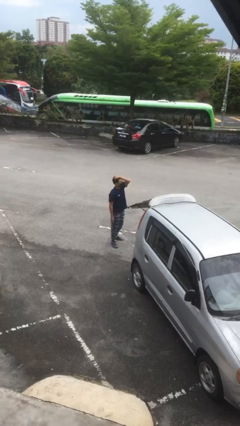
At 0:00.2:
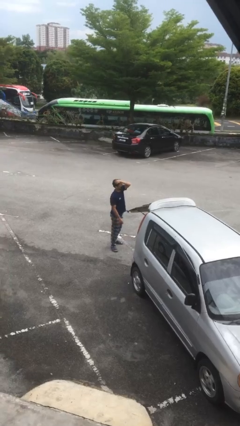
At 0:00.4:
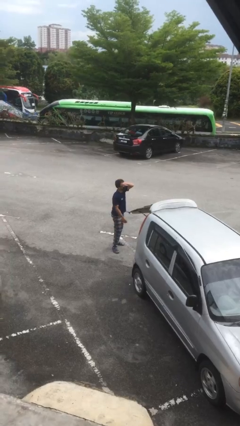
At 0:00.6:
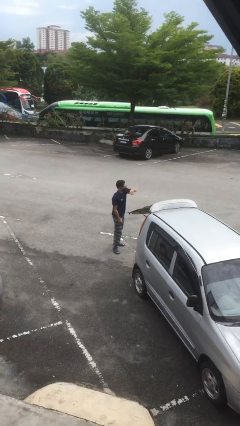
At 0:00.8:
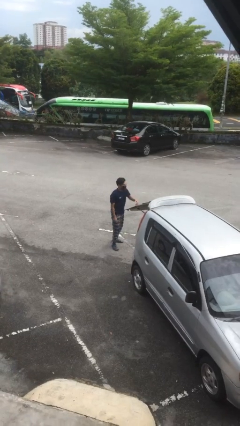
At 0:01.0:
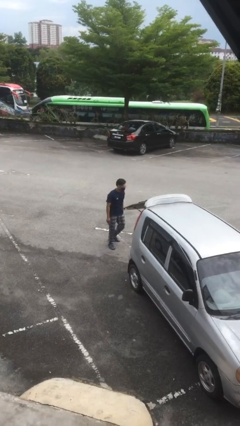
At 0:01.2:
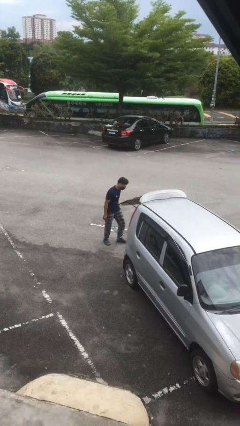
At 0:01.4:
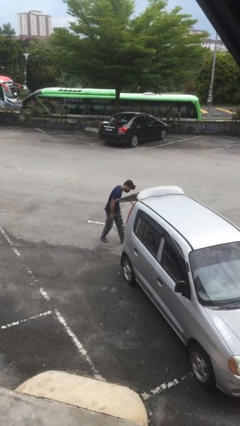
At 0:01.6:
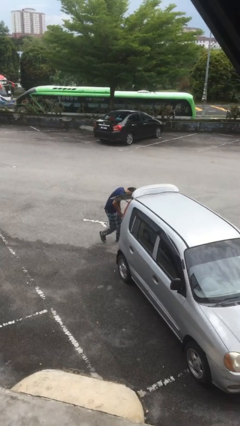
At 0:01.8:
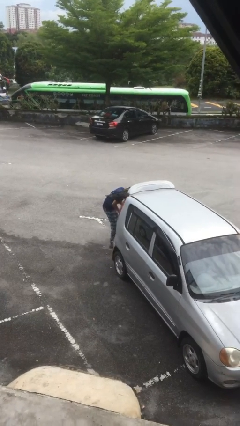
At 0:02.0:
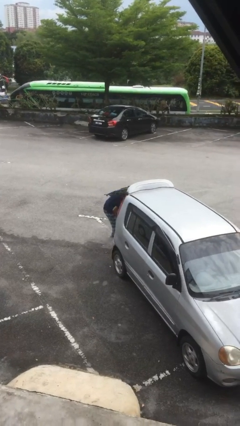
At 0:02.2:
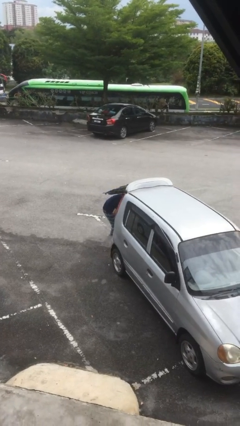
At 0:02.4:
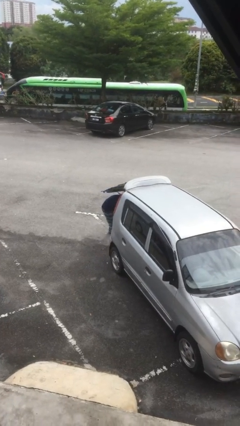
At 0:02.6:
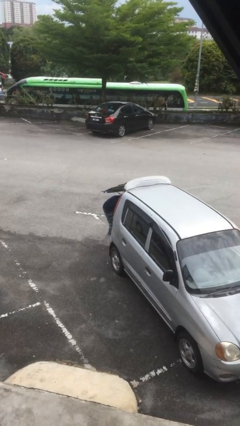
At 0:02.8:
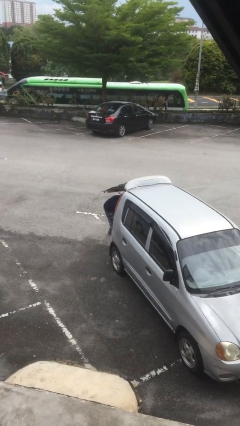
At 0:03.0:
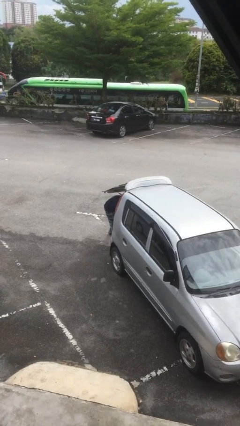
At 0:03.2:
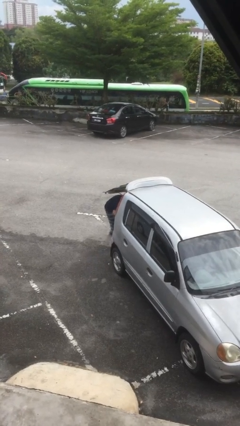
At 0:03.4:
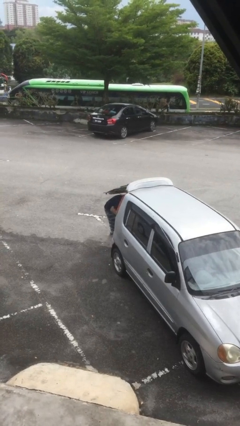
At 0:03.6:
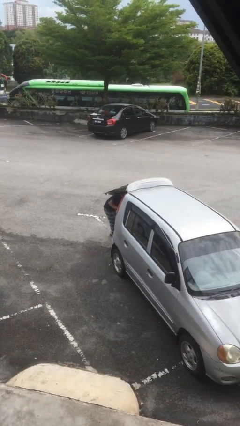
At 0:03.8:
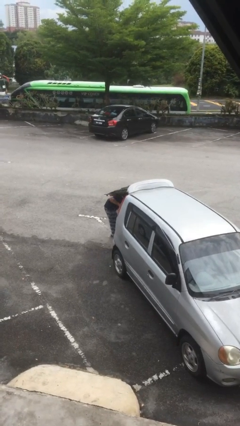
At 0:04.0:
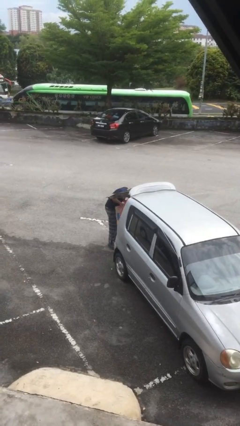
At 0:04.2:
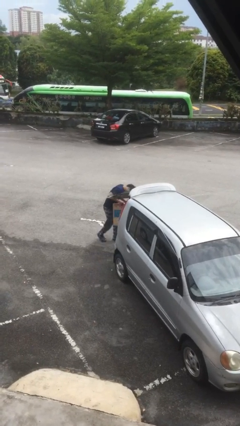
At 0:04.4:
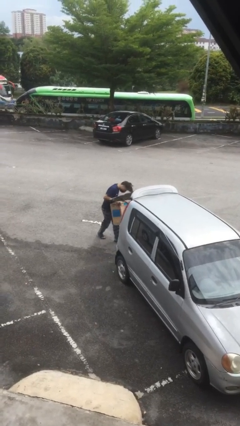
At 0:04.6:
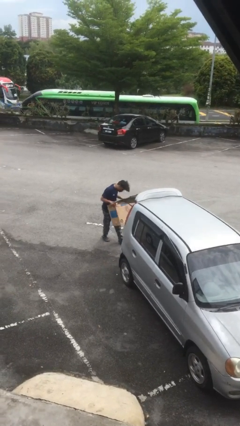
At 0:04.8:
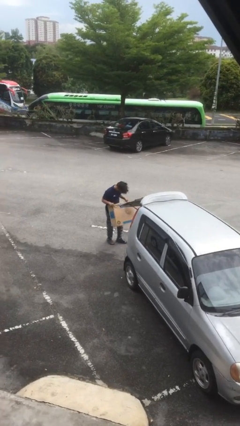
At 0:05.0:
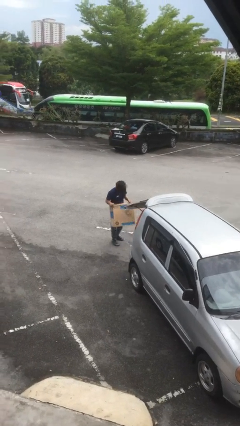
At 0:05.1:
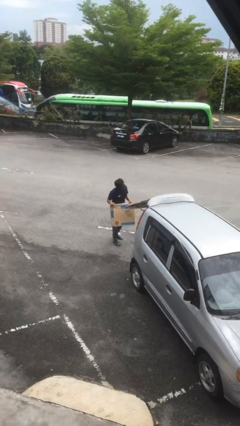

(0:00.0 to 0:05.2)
person unloads car

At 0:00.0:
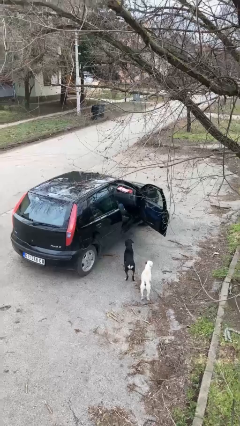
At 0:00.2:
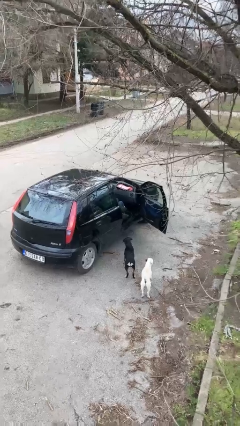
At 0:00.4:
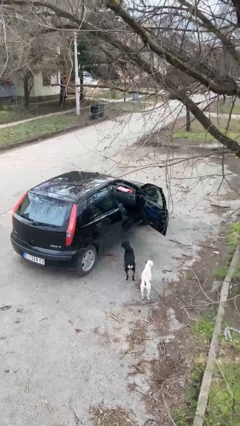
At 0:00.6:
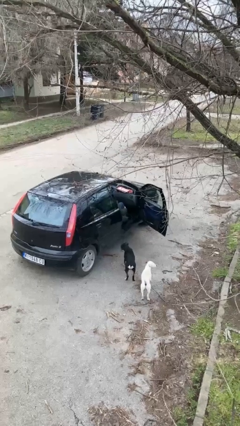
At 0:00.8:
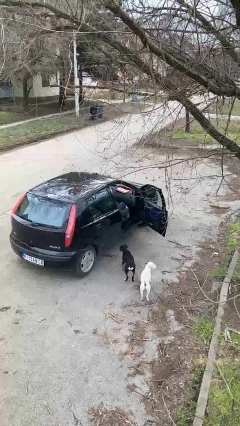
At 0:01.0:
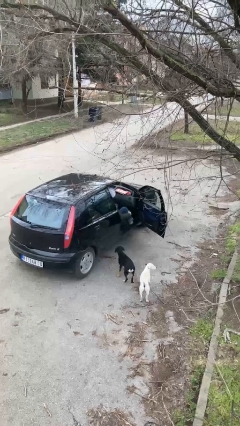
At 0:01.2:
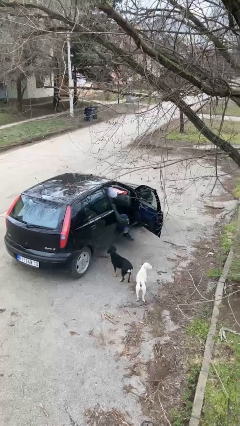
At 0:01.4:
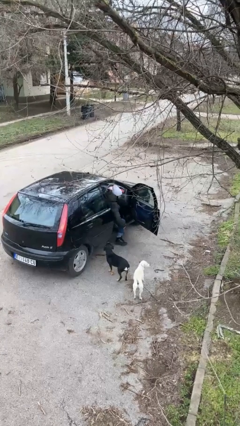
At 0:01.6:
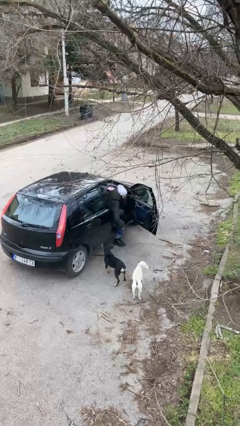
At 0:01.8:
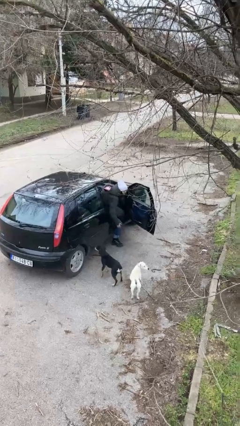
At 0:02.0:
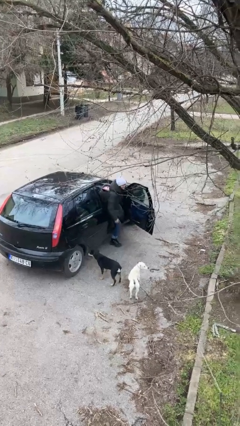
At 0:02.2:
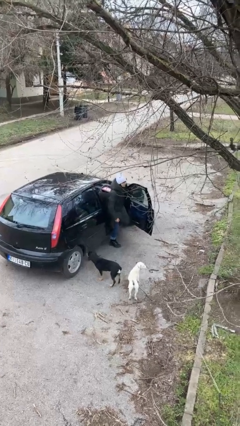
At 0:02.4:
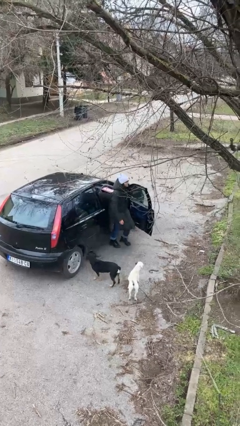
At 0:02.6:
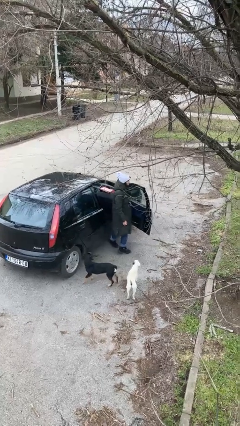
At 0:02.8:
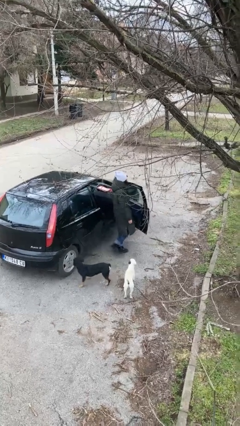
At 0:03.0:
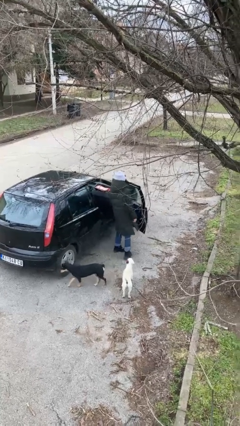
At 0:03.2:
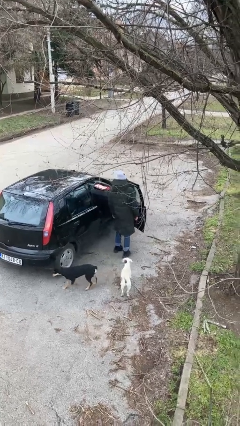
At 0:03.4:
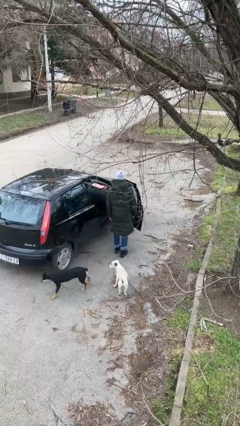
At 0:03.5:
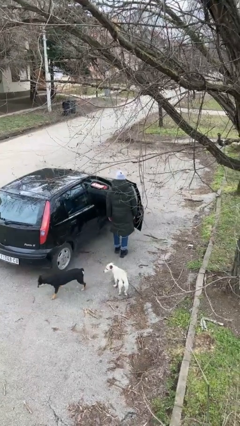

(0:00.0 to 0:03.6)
person exits car

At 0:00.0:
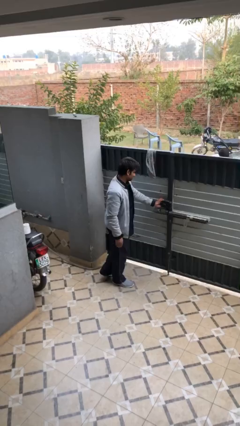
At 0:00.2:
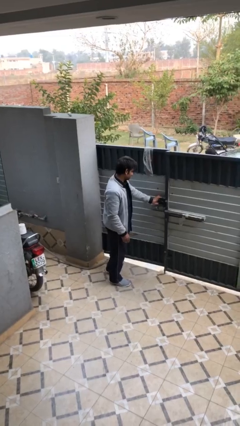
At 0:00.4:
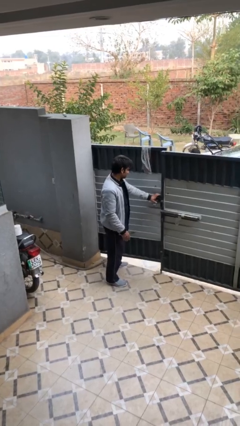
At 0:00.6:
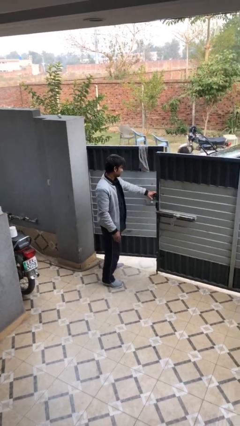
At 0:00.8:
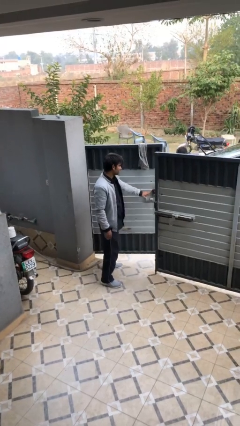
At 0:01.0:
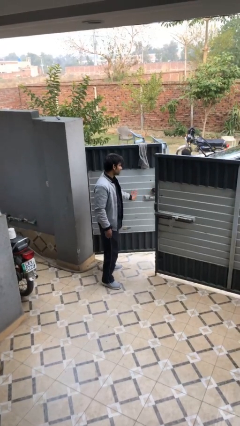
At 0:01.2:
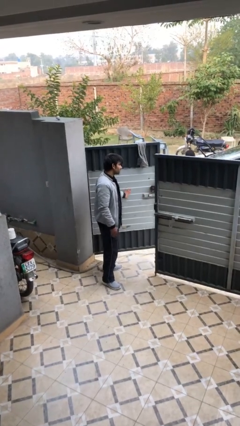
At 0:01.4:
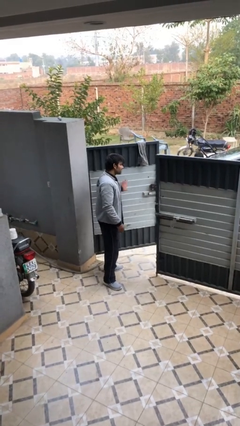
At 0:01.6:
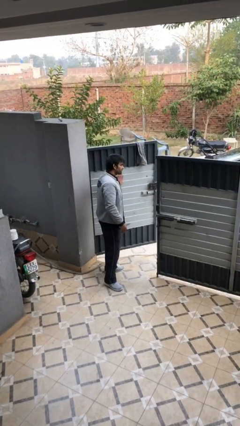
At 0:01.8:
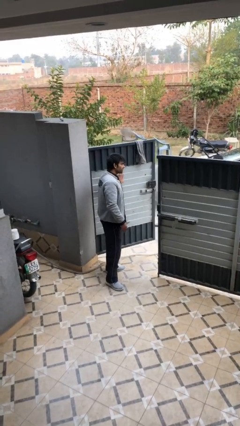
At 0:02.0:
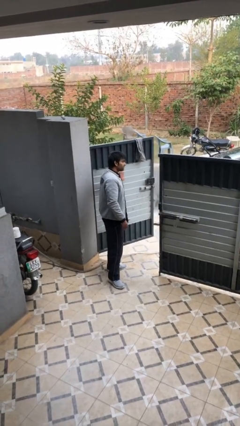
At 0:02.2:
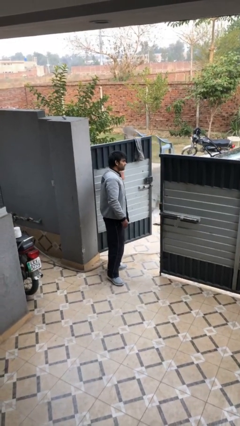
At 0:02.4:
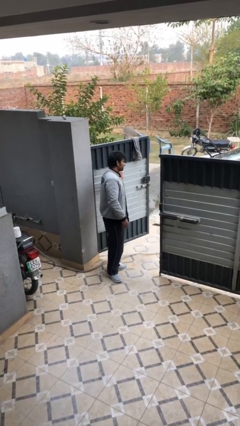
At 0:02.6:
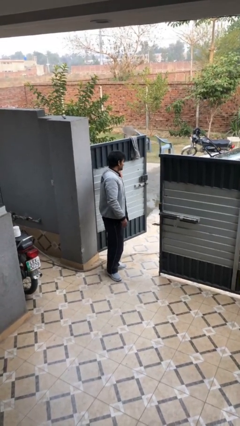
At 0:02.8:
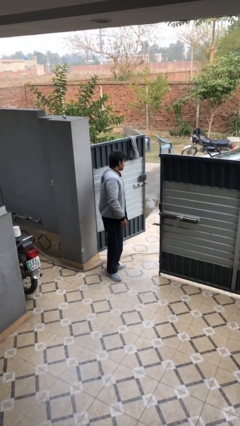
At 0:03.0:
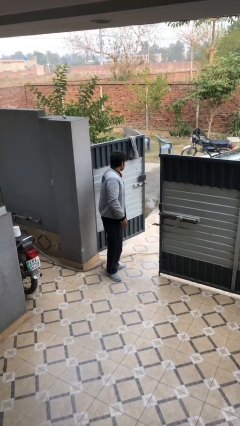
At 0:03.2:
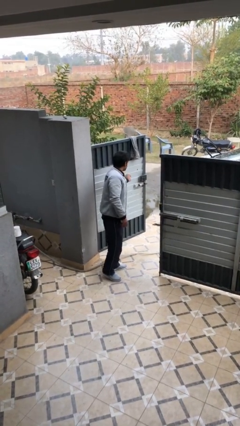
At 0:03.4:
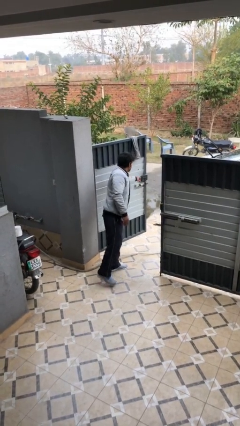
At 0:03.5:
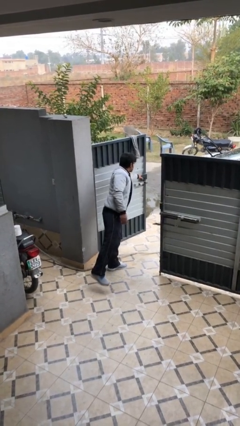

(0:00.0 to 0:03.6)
person opens facility door

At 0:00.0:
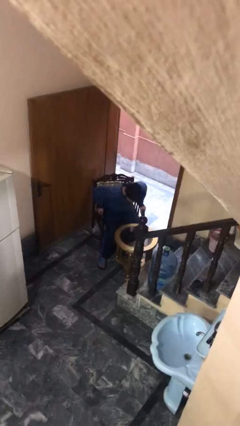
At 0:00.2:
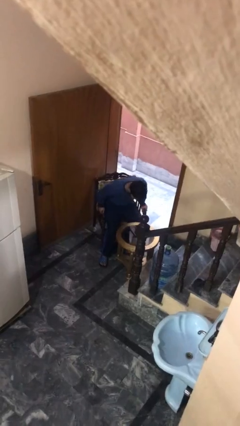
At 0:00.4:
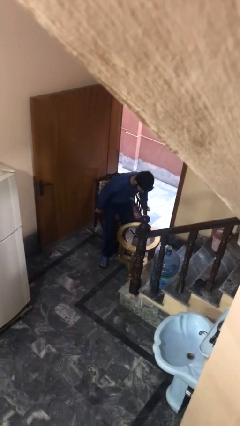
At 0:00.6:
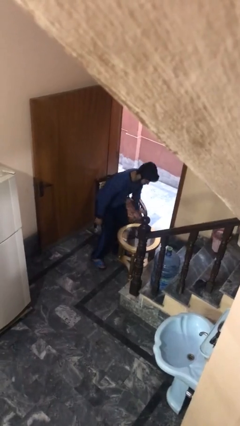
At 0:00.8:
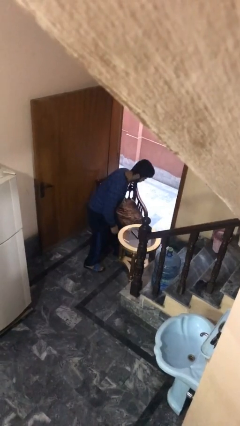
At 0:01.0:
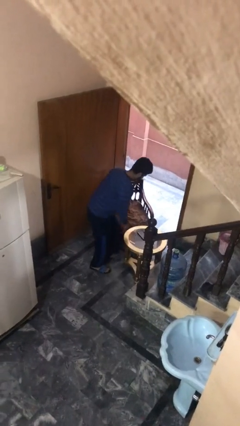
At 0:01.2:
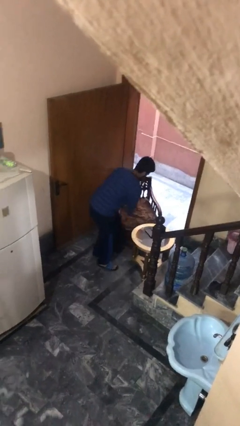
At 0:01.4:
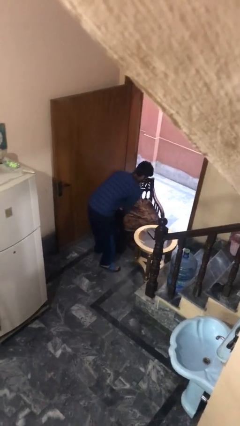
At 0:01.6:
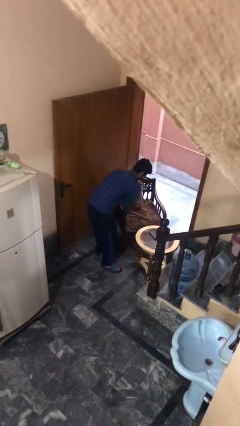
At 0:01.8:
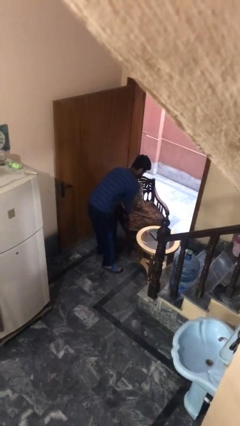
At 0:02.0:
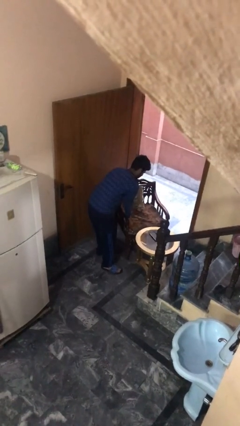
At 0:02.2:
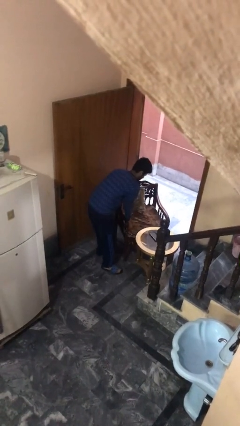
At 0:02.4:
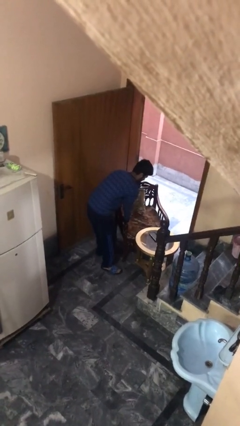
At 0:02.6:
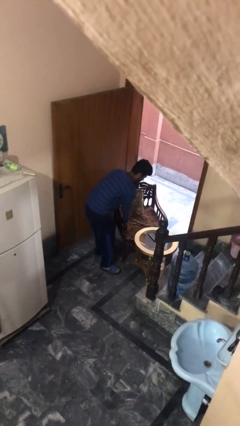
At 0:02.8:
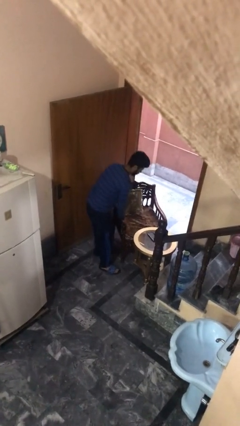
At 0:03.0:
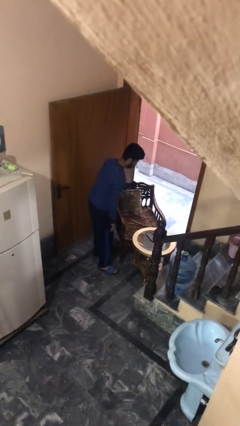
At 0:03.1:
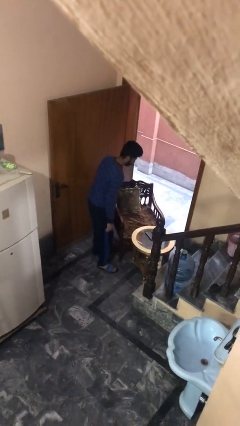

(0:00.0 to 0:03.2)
person stands up

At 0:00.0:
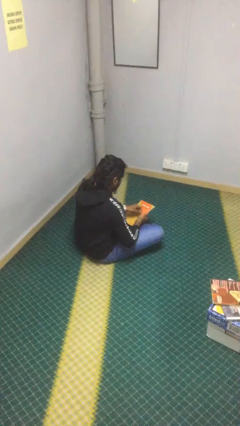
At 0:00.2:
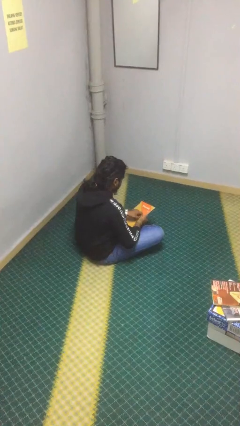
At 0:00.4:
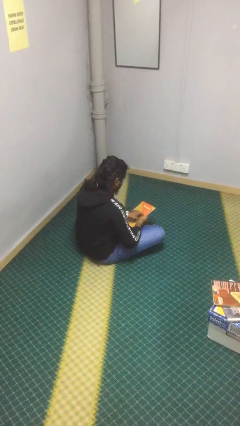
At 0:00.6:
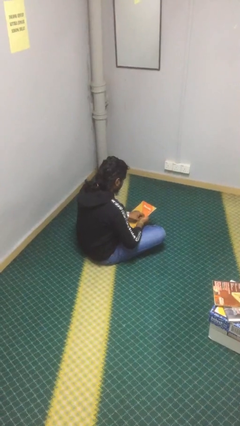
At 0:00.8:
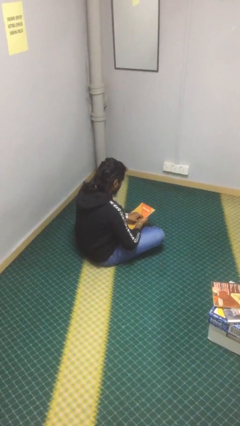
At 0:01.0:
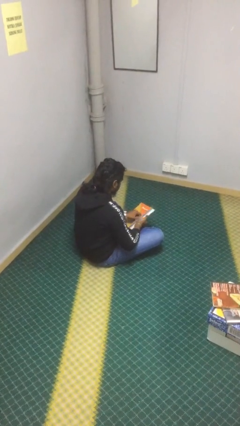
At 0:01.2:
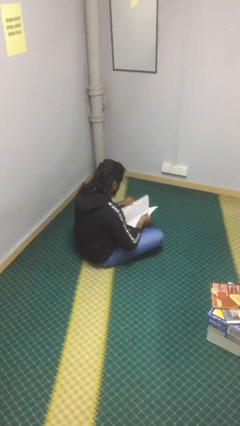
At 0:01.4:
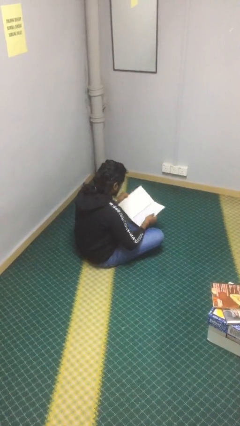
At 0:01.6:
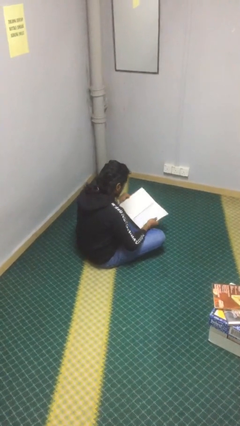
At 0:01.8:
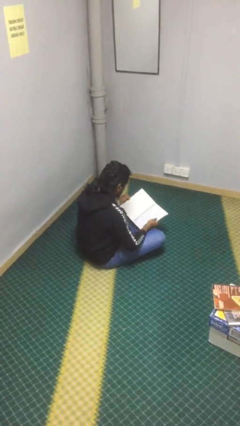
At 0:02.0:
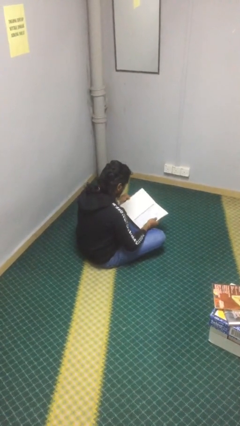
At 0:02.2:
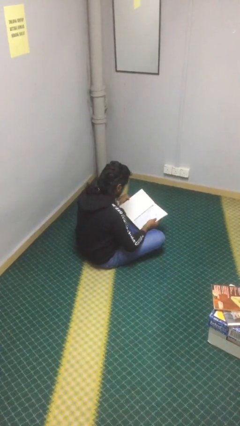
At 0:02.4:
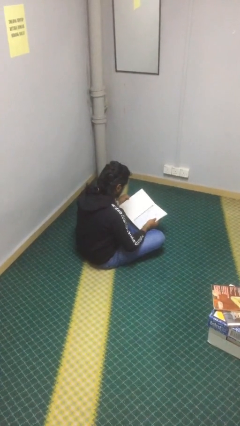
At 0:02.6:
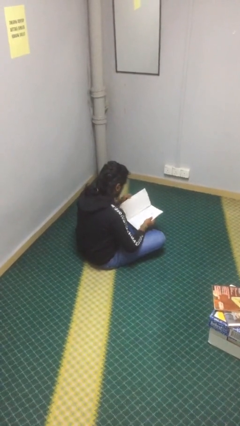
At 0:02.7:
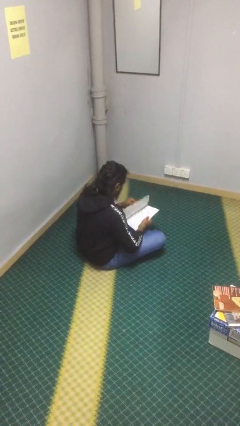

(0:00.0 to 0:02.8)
person reads book
